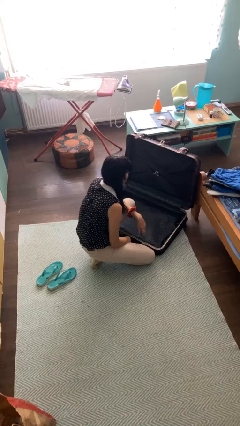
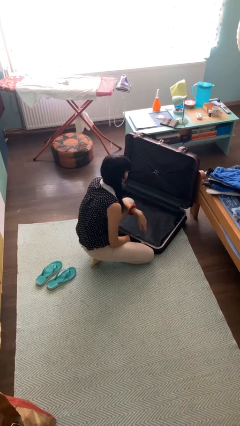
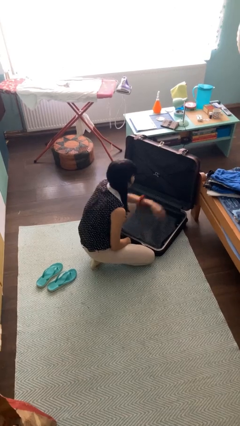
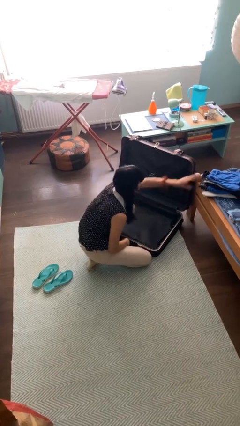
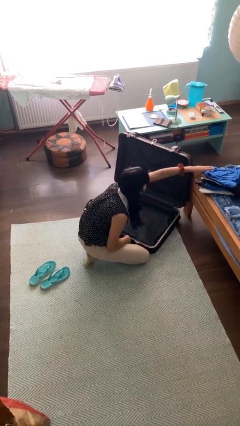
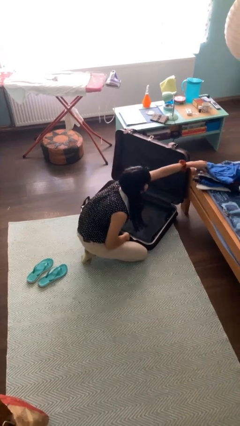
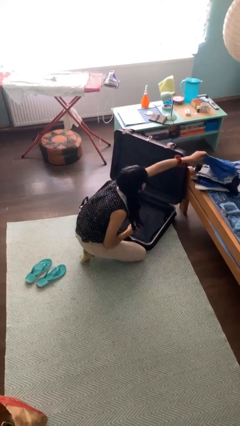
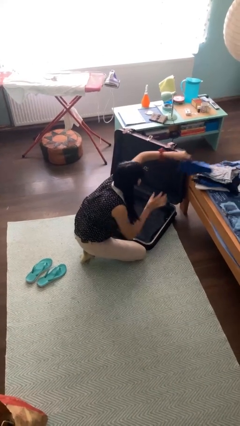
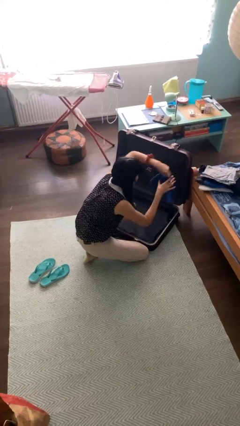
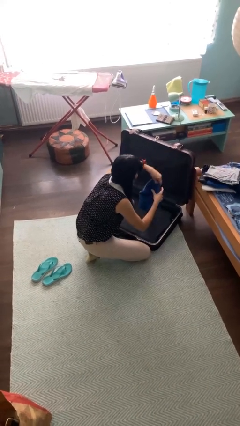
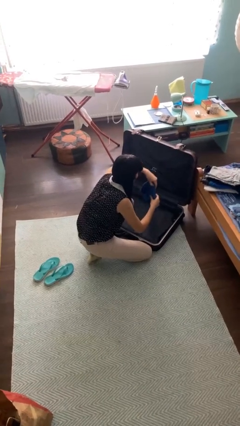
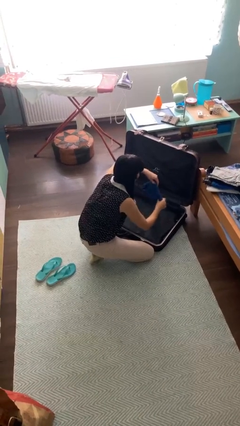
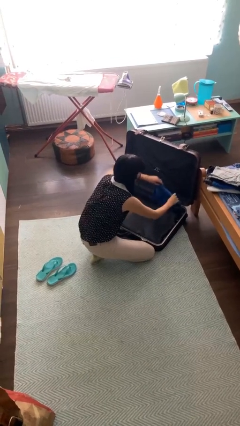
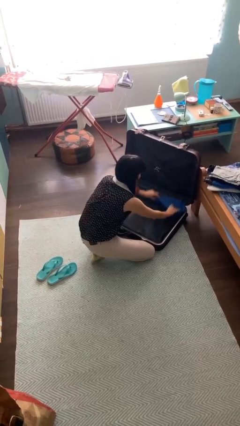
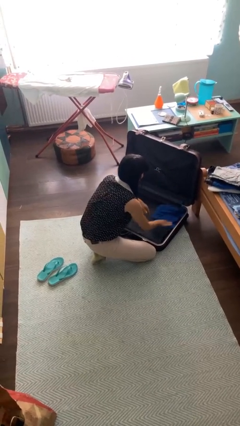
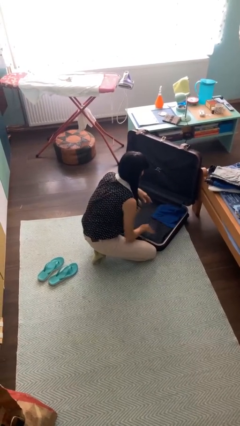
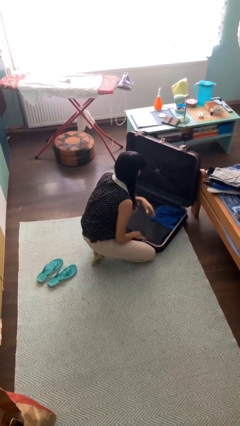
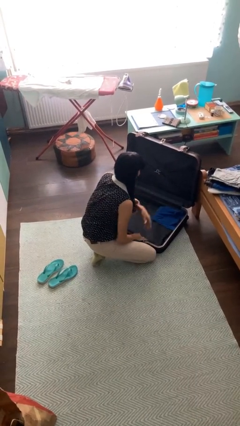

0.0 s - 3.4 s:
person loads clothes into suitcase

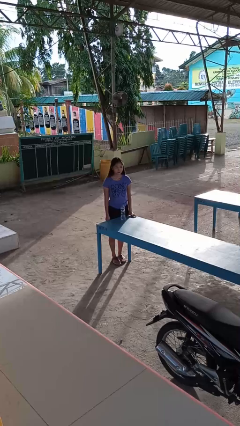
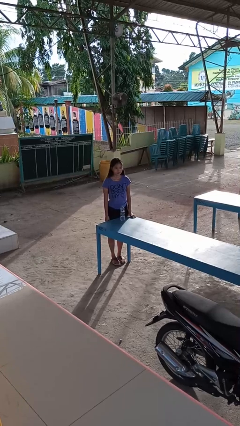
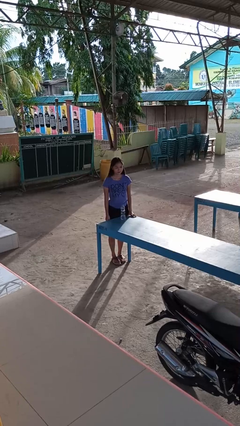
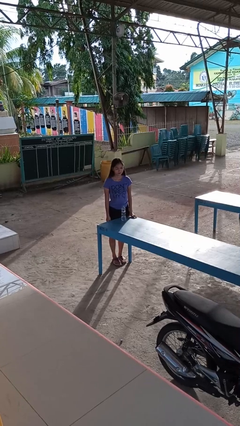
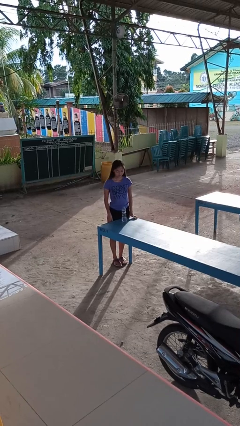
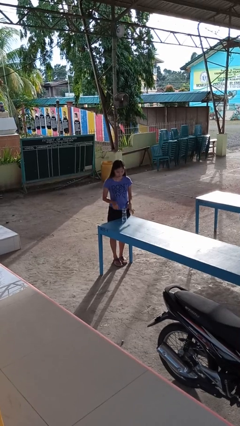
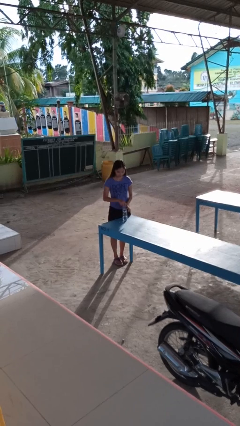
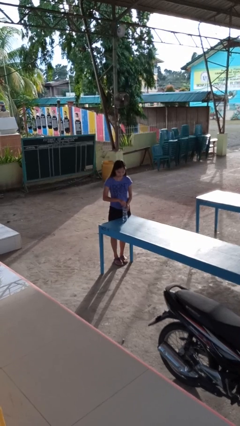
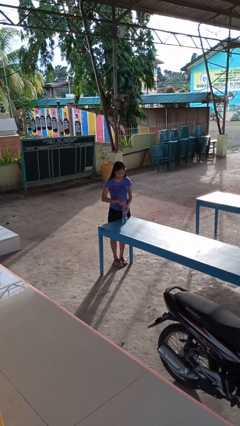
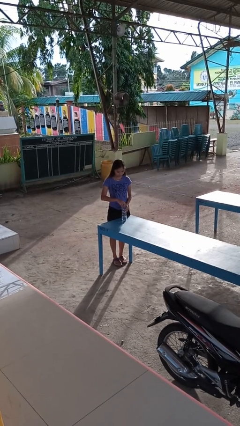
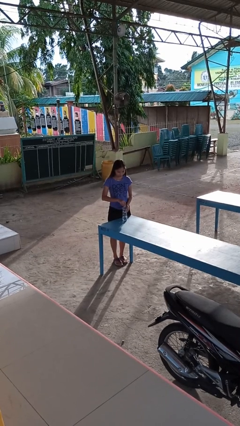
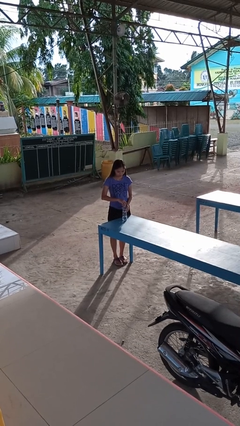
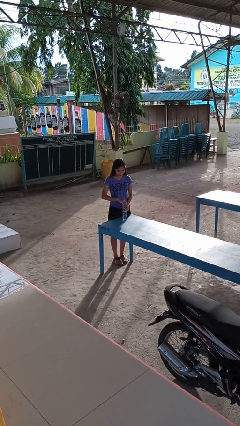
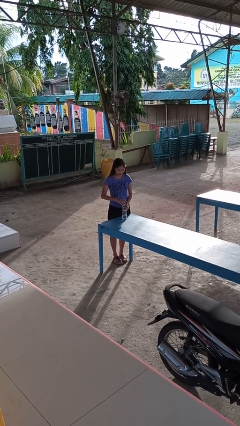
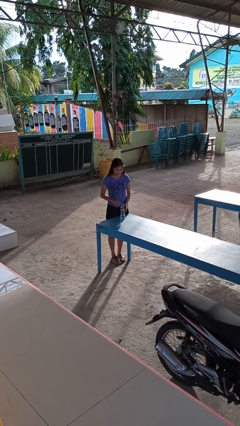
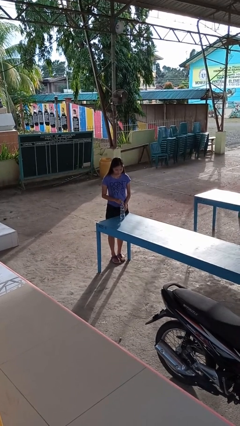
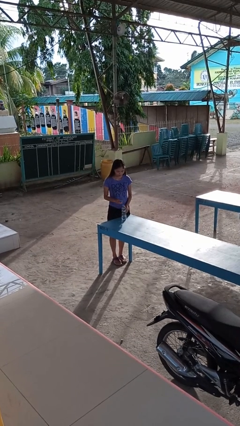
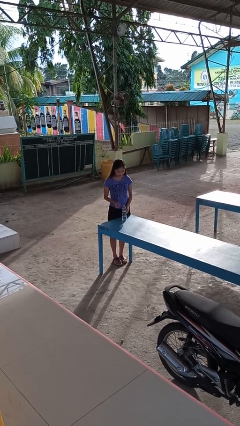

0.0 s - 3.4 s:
person unscrews lid from bottle

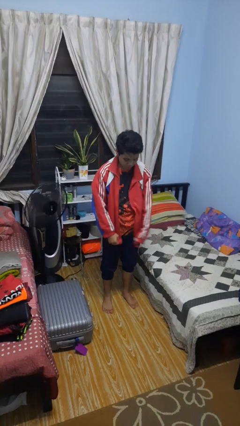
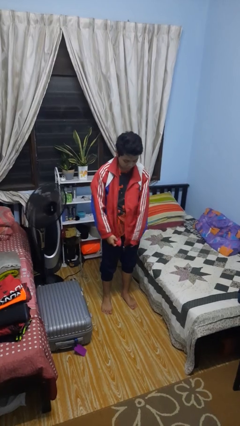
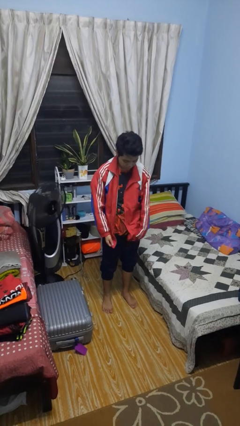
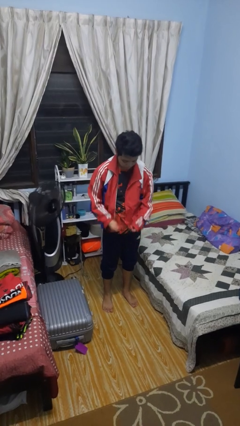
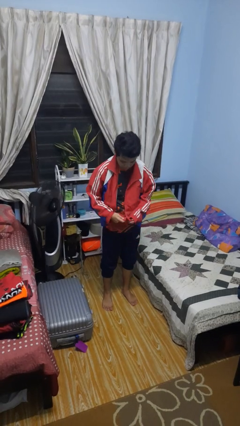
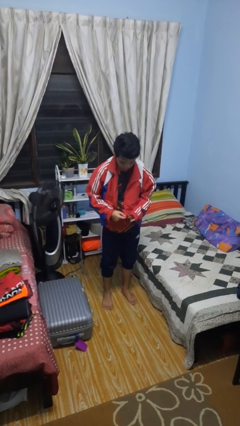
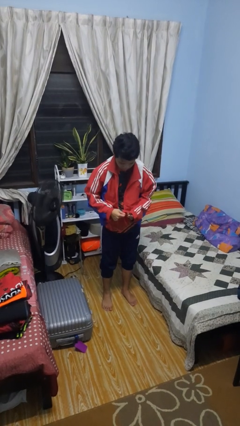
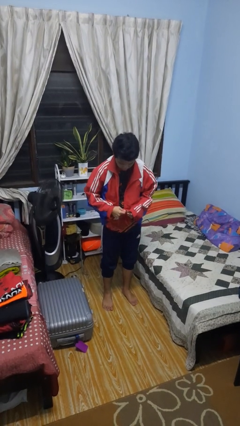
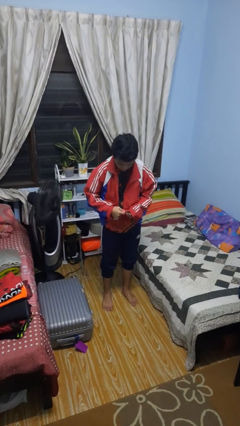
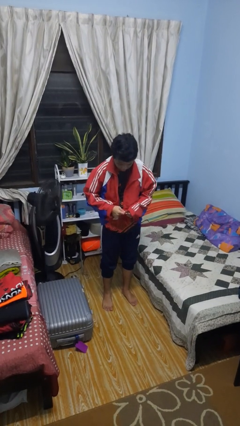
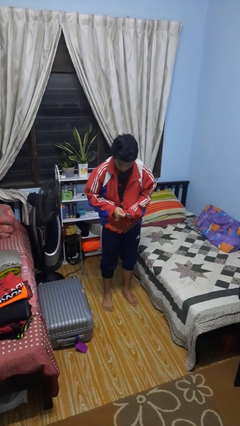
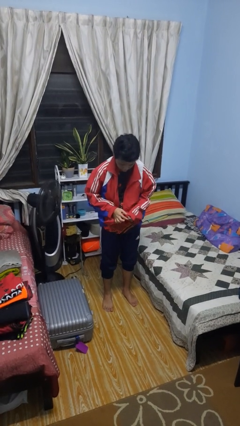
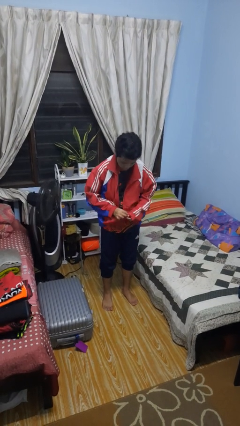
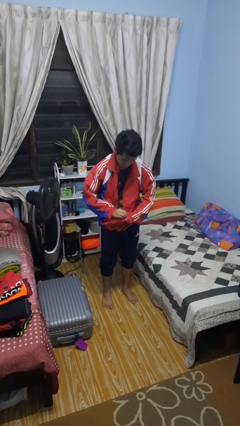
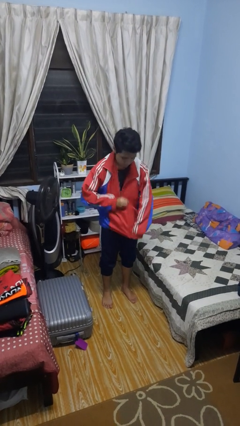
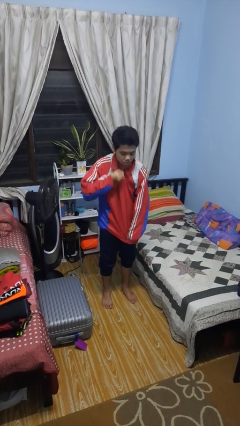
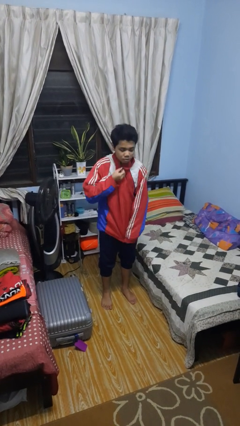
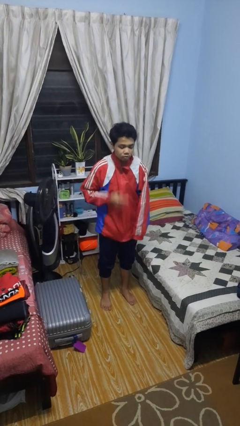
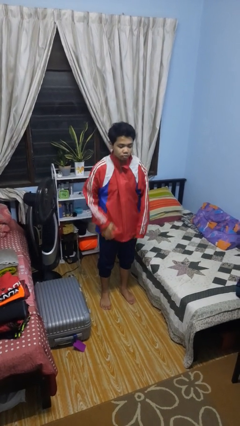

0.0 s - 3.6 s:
person zips up jacket

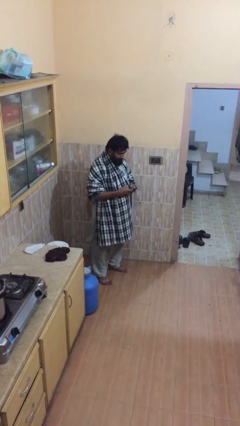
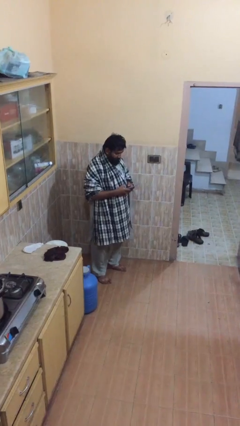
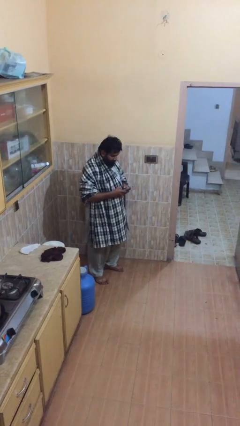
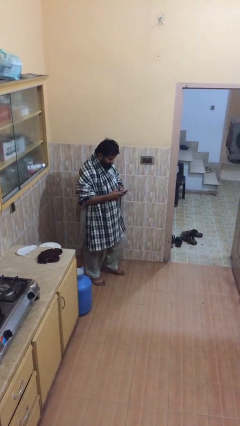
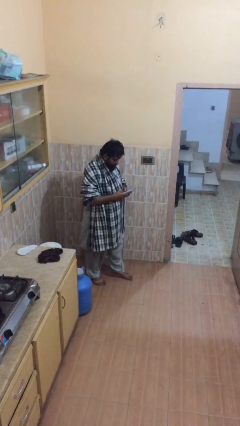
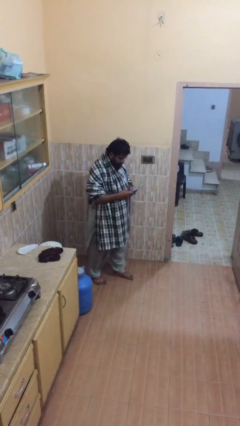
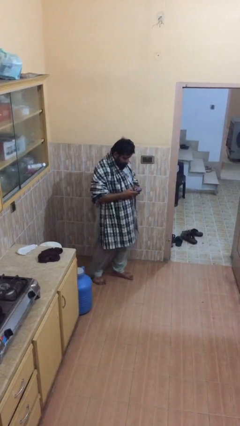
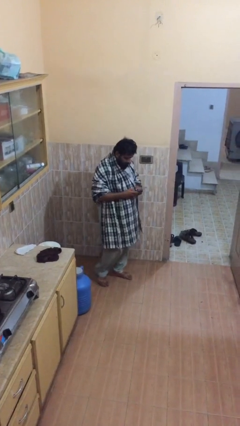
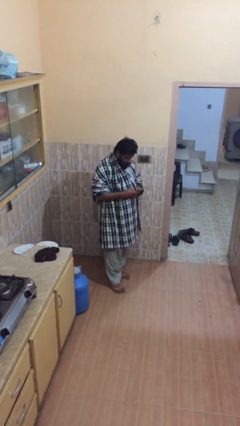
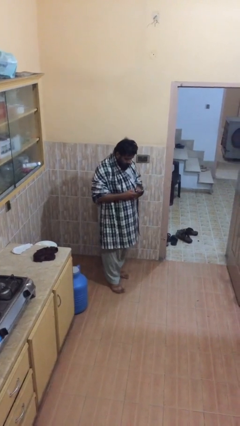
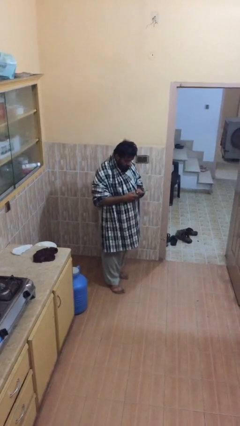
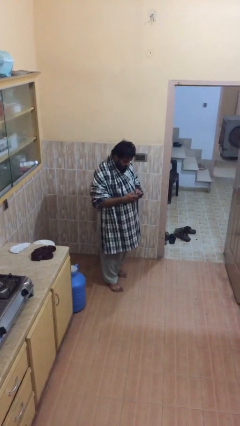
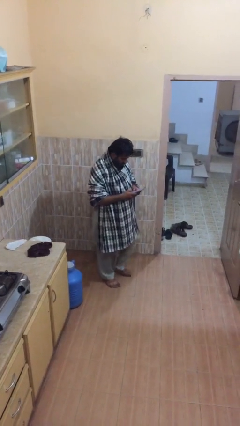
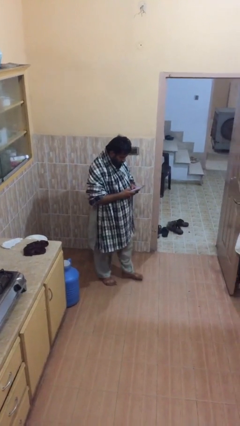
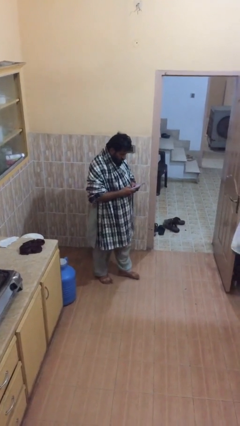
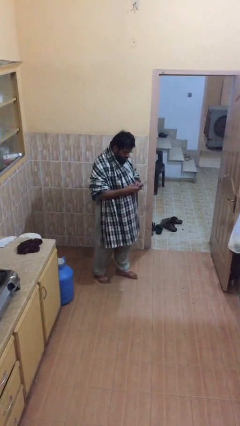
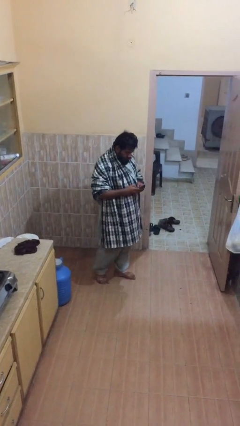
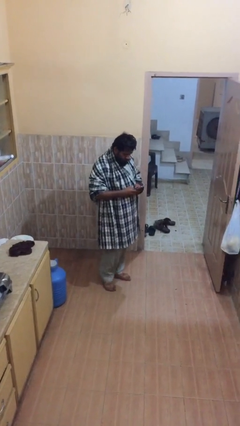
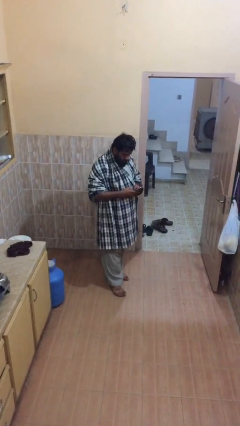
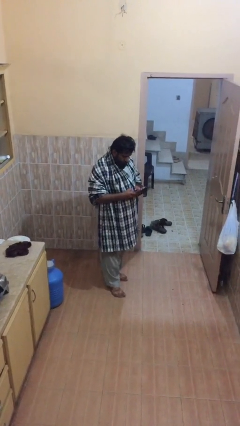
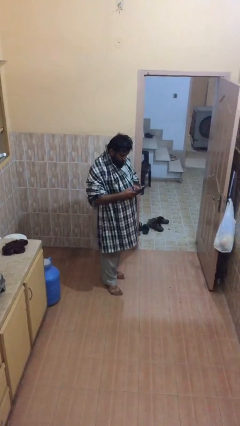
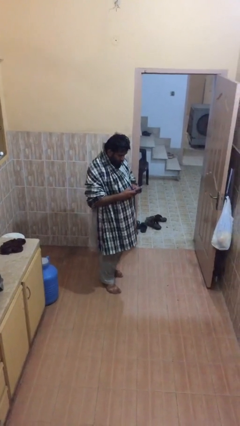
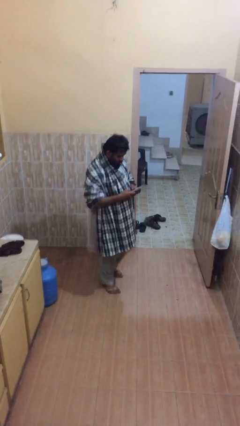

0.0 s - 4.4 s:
person texts on phone

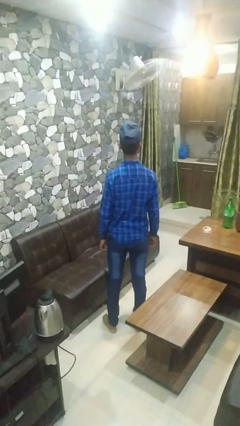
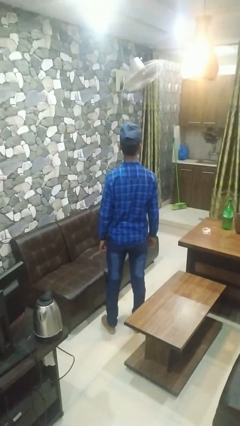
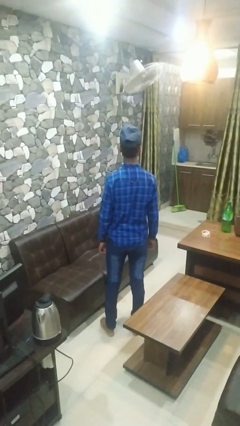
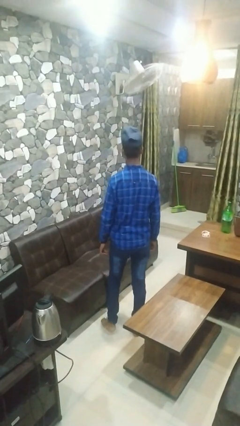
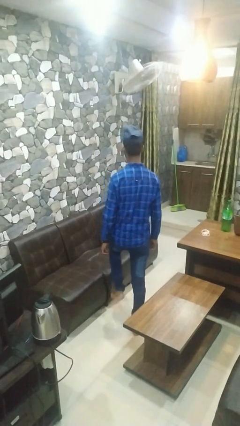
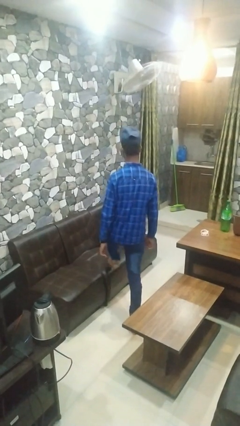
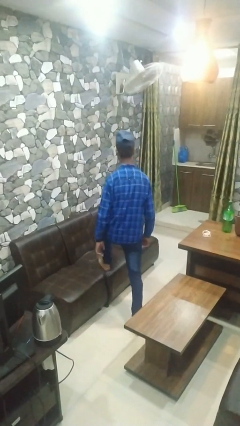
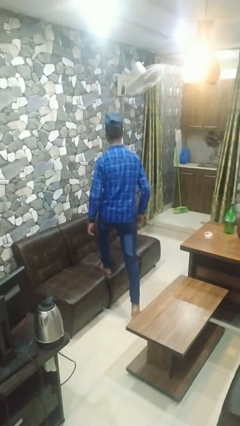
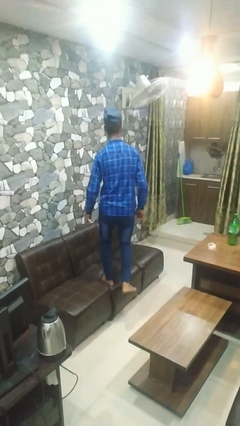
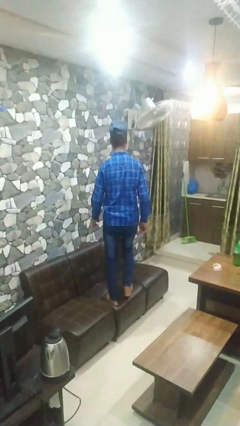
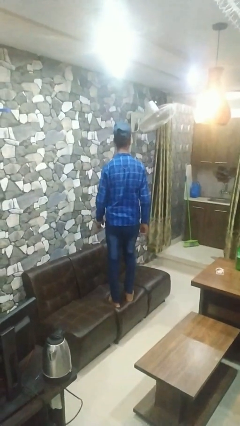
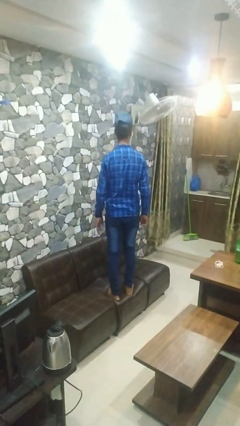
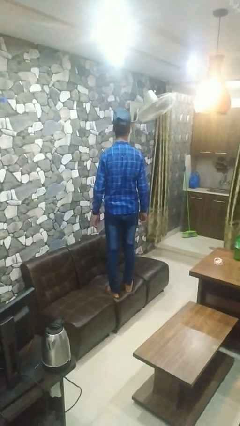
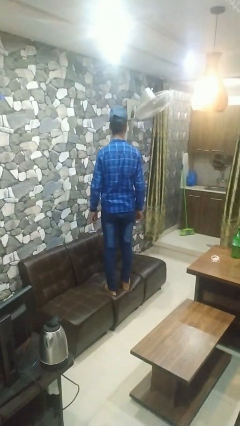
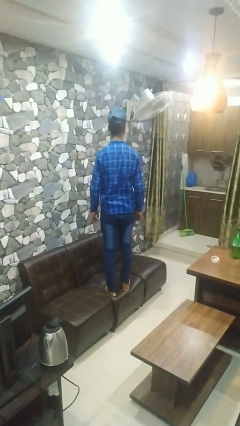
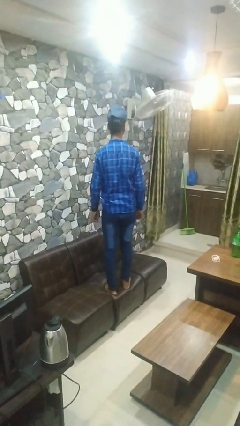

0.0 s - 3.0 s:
person climbs on couch
